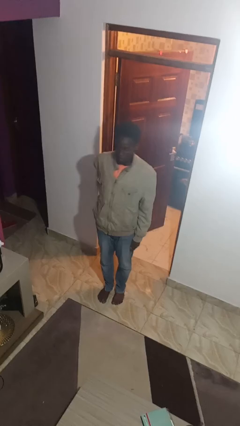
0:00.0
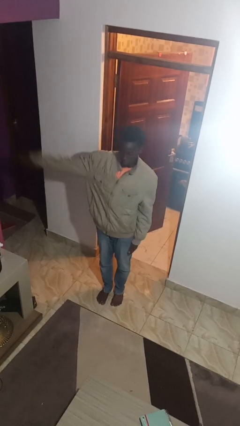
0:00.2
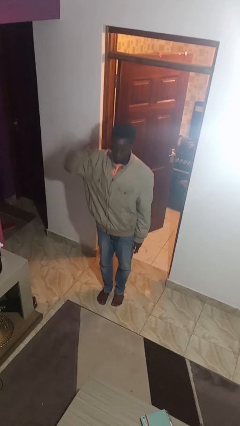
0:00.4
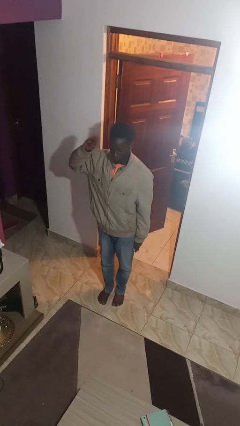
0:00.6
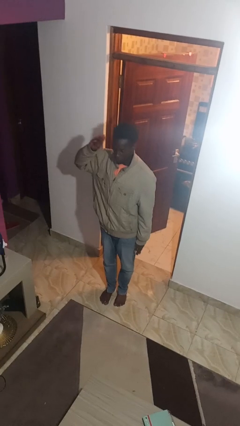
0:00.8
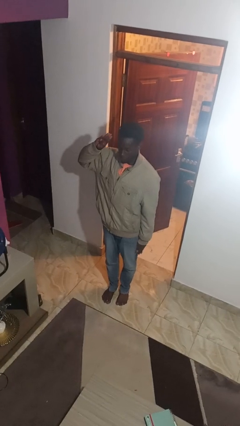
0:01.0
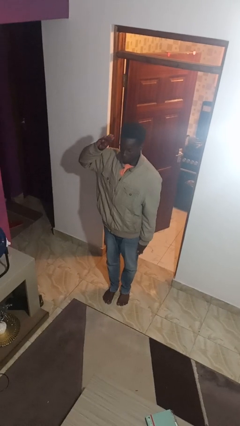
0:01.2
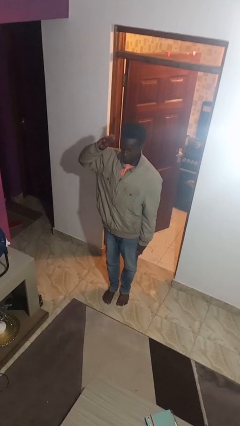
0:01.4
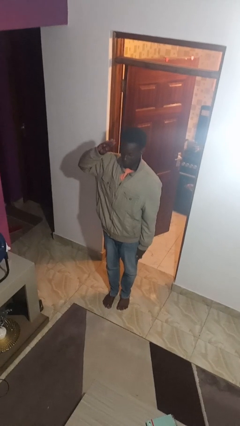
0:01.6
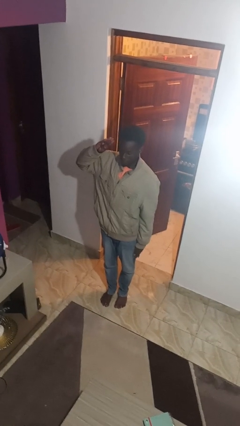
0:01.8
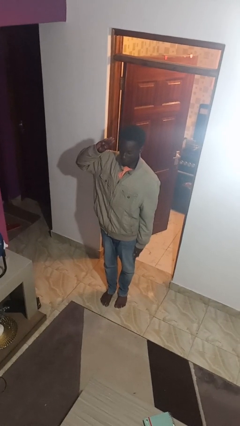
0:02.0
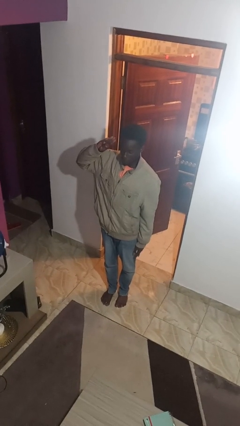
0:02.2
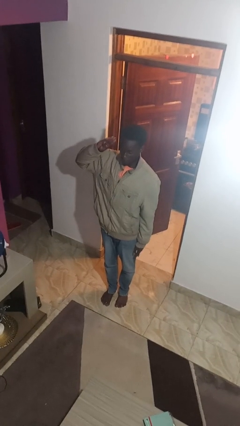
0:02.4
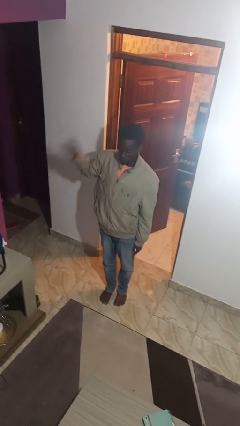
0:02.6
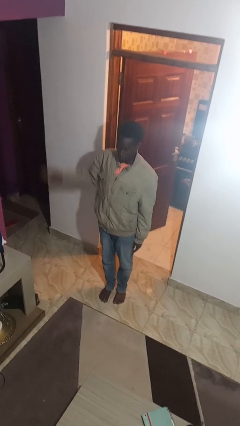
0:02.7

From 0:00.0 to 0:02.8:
person salutes

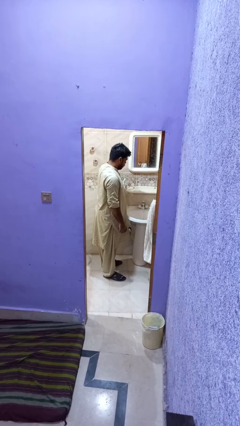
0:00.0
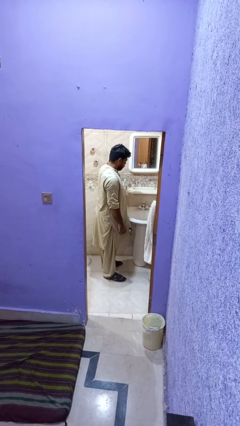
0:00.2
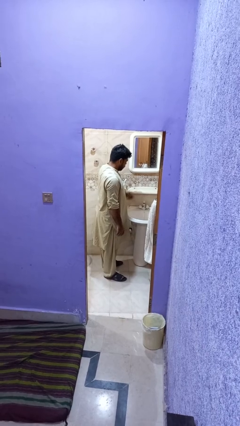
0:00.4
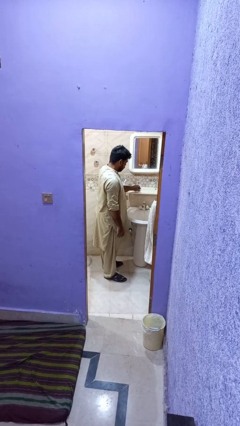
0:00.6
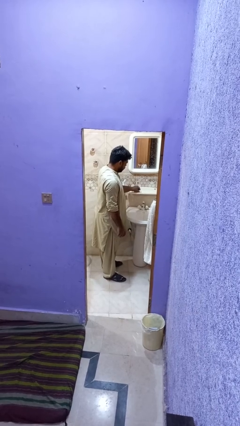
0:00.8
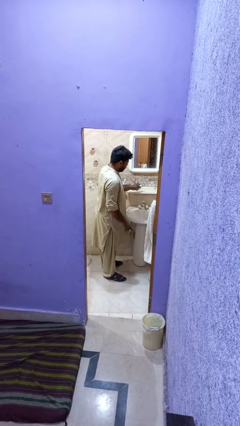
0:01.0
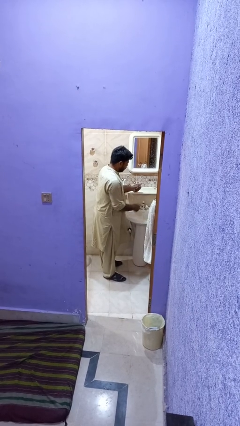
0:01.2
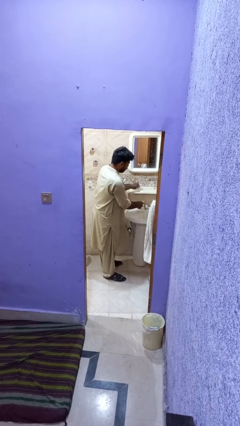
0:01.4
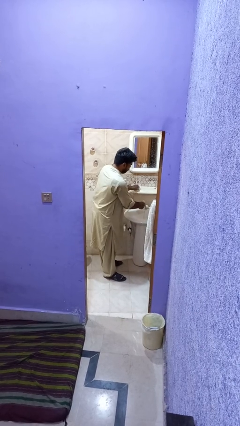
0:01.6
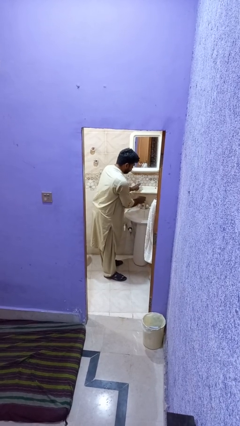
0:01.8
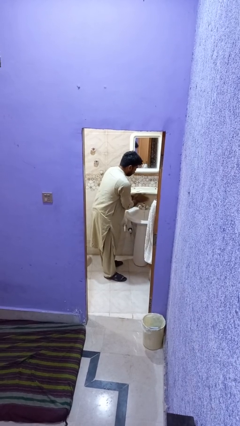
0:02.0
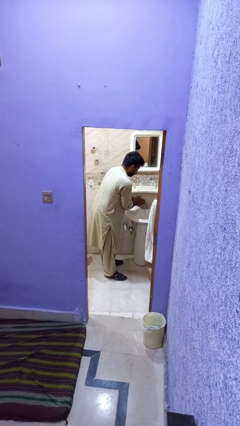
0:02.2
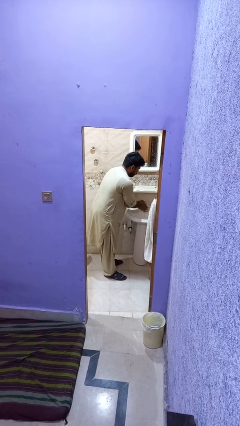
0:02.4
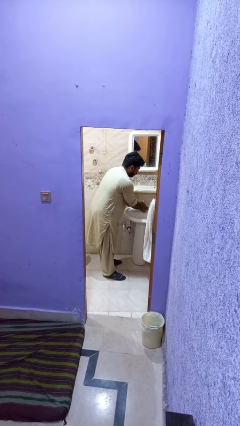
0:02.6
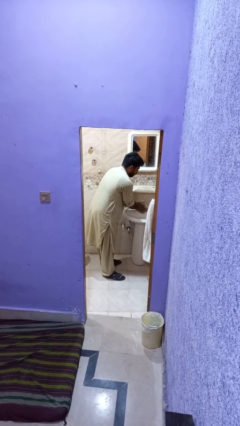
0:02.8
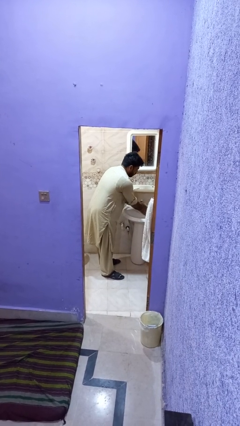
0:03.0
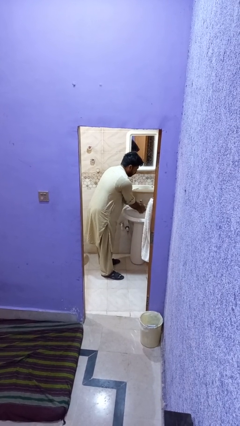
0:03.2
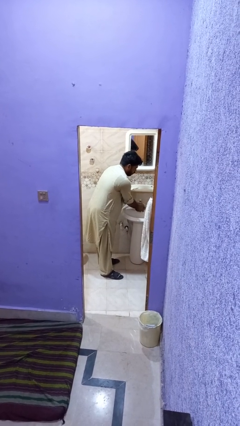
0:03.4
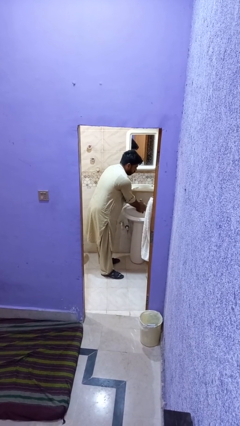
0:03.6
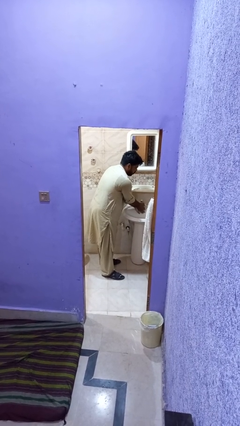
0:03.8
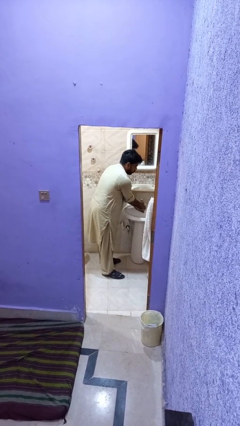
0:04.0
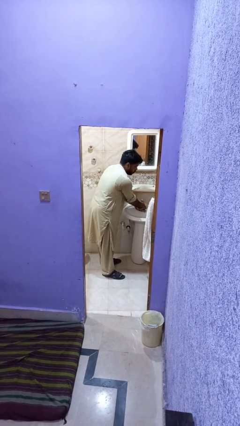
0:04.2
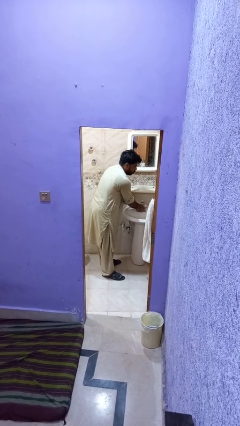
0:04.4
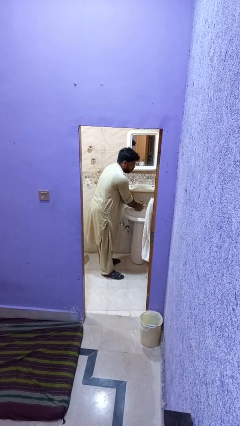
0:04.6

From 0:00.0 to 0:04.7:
person washes hands

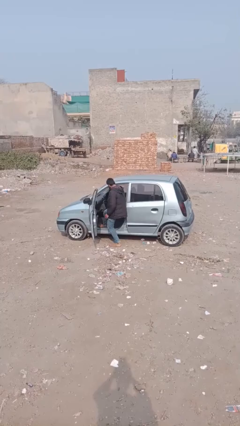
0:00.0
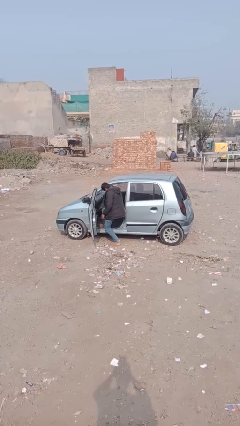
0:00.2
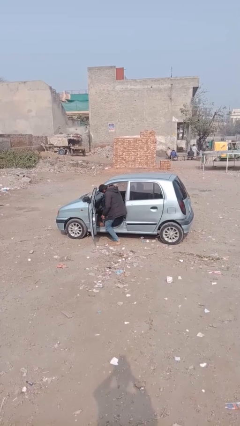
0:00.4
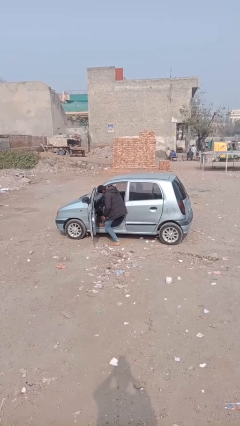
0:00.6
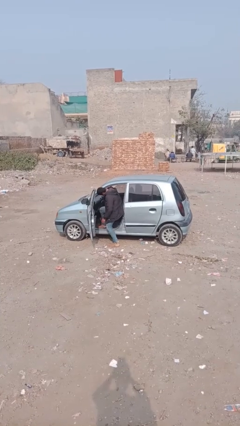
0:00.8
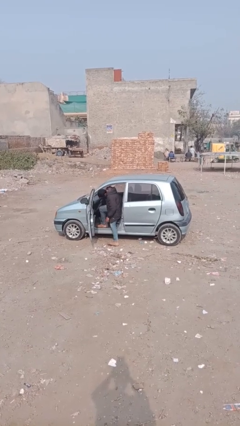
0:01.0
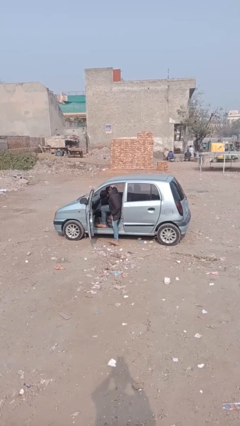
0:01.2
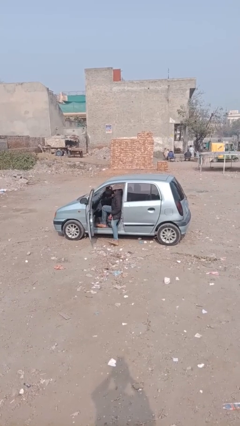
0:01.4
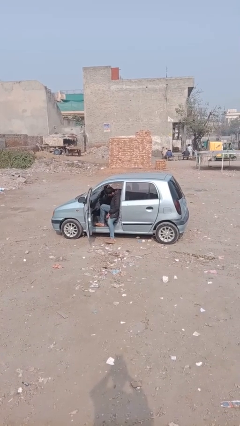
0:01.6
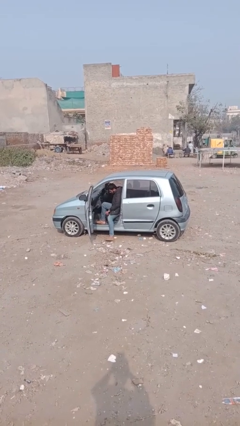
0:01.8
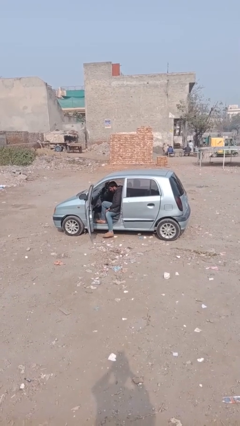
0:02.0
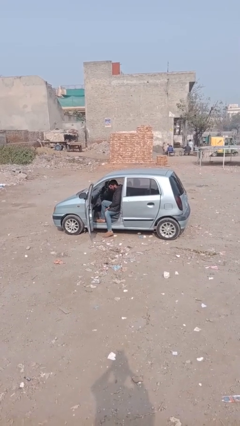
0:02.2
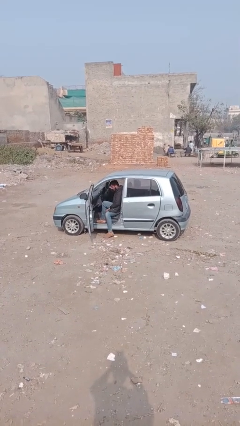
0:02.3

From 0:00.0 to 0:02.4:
person enters car

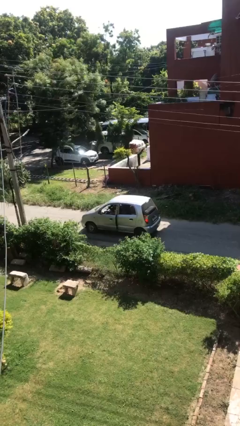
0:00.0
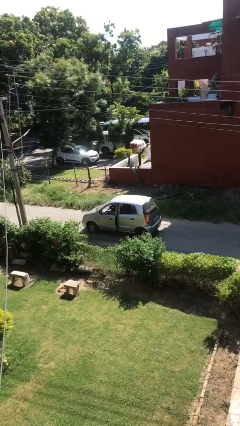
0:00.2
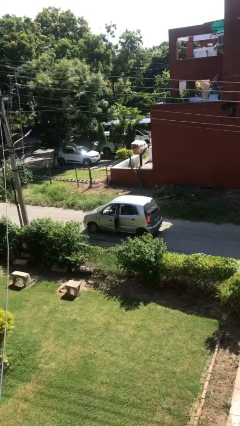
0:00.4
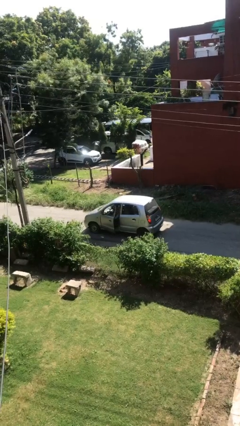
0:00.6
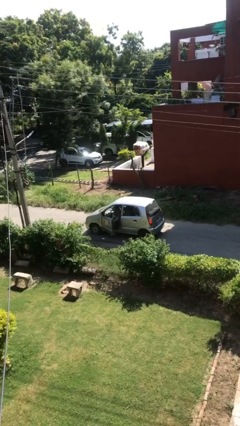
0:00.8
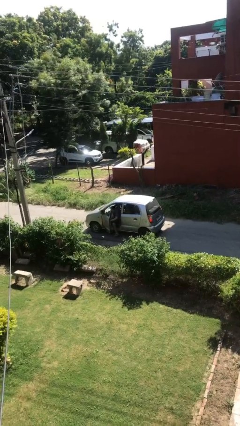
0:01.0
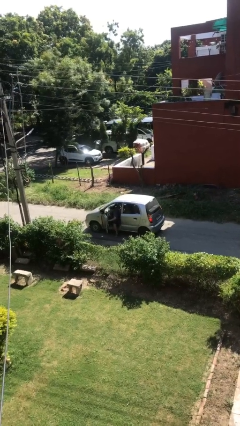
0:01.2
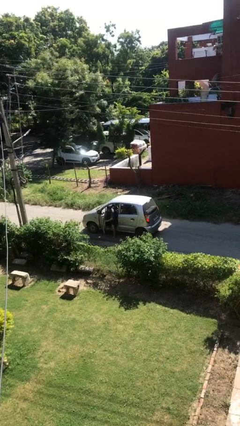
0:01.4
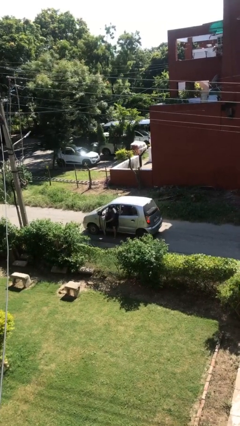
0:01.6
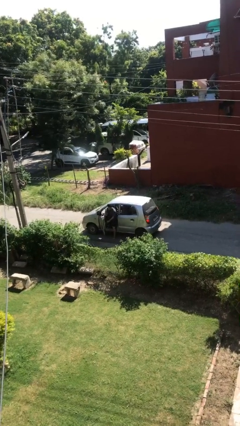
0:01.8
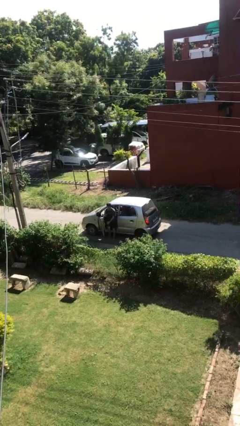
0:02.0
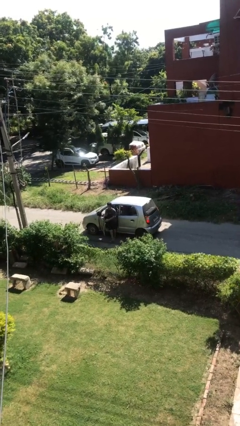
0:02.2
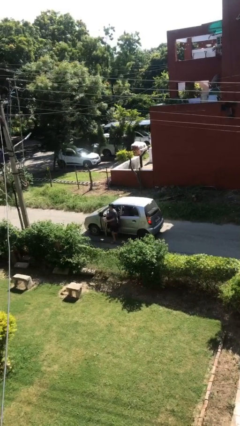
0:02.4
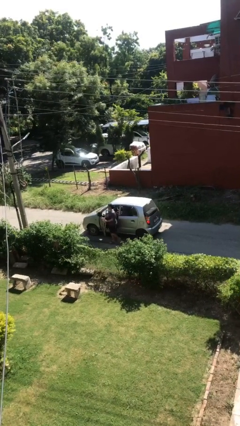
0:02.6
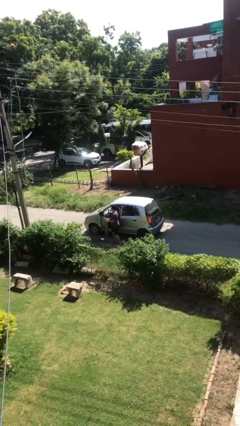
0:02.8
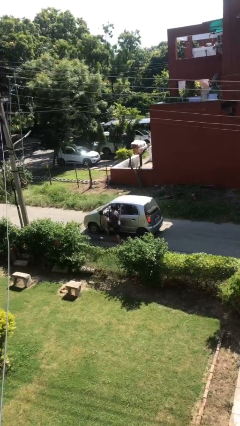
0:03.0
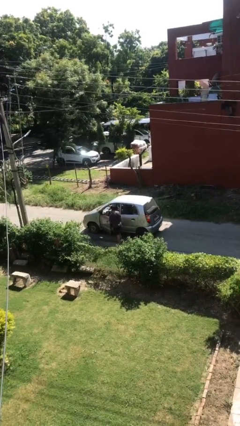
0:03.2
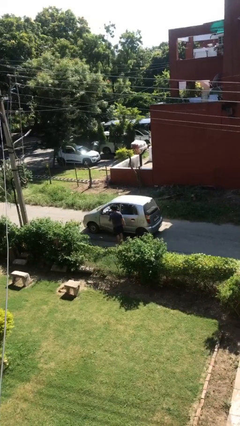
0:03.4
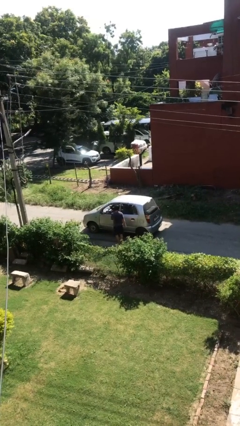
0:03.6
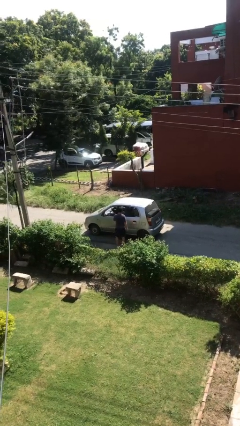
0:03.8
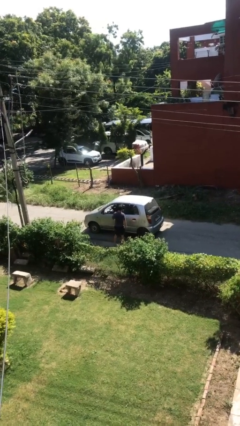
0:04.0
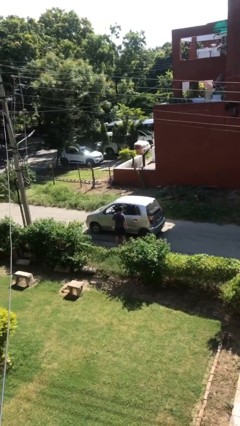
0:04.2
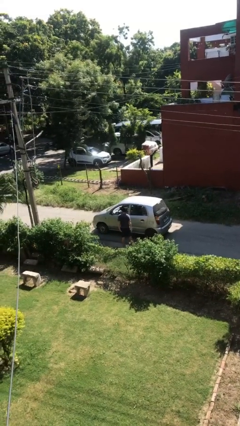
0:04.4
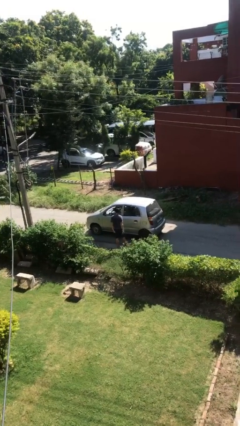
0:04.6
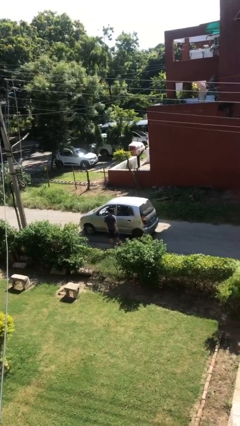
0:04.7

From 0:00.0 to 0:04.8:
car drops off person

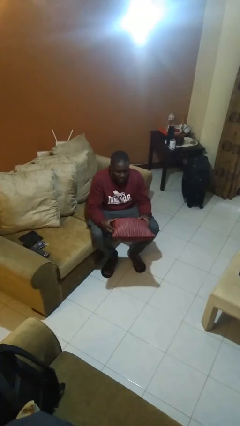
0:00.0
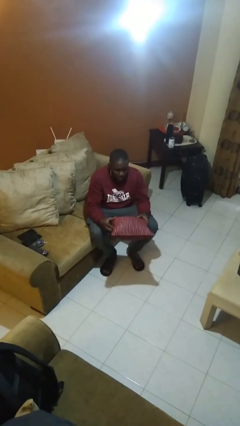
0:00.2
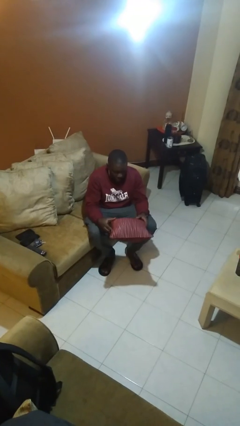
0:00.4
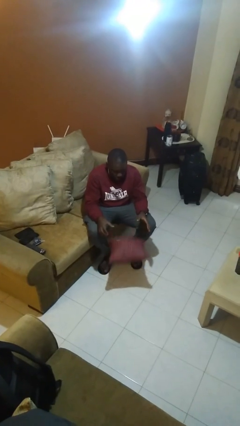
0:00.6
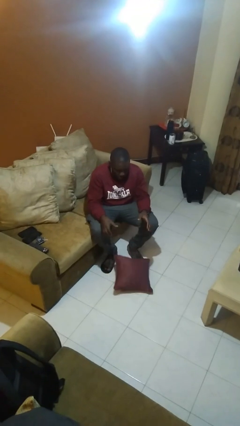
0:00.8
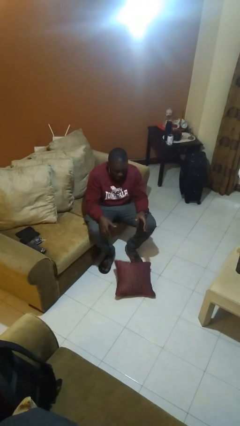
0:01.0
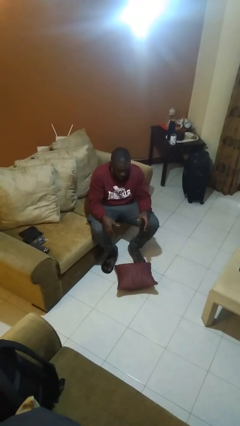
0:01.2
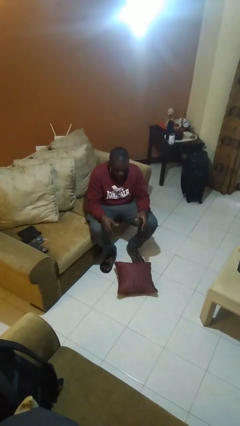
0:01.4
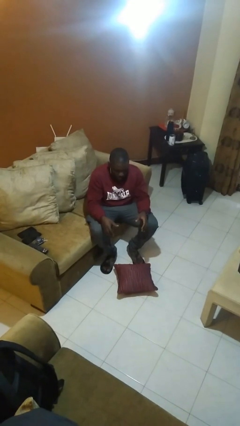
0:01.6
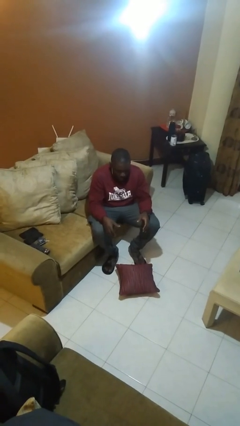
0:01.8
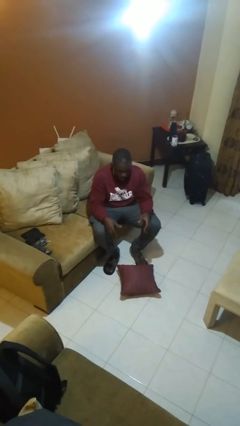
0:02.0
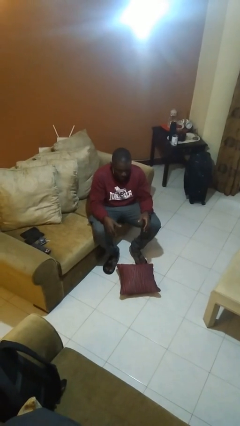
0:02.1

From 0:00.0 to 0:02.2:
person drops object

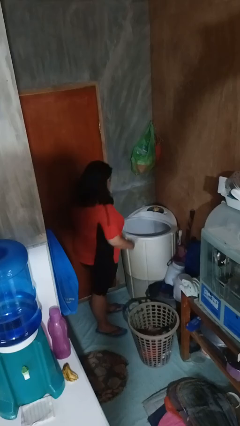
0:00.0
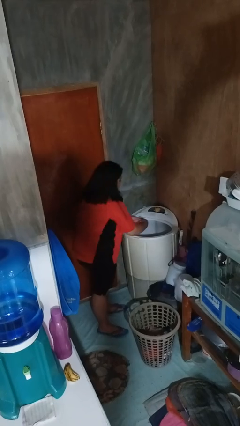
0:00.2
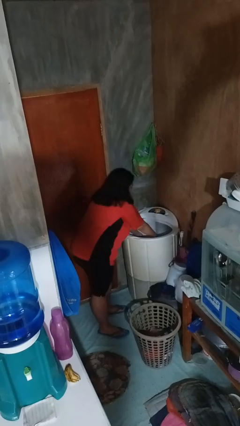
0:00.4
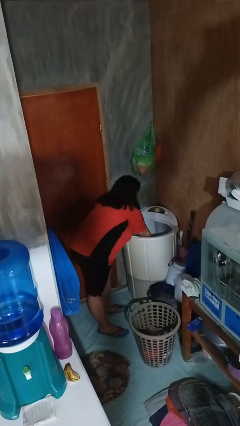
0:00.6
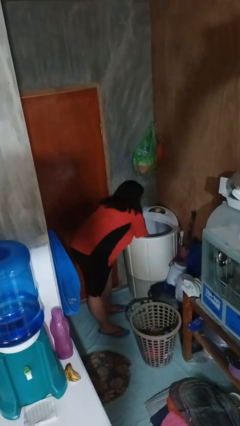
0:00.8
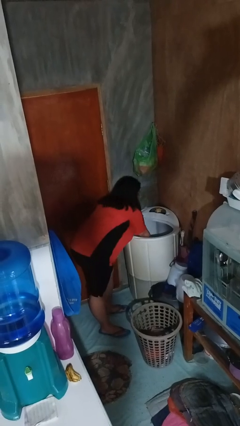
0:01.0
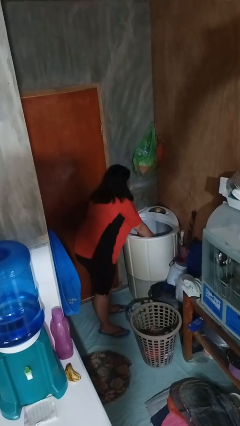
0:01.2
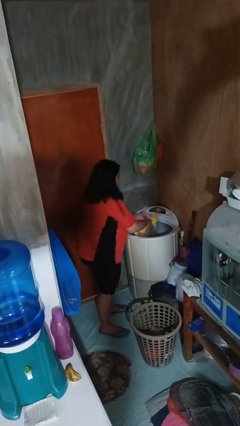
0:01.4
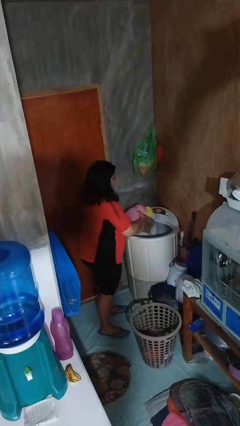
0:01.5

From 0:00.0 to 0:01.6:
person loads clotheswasher
